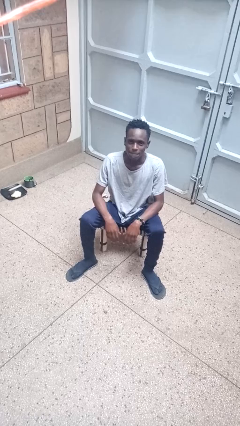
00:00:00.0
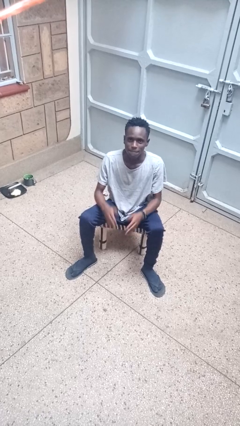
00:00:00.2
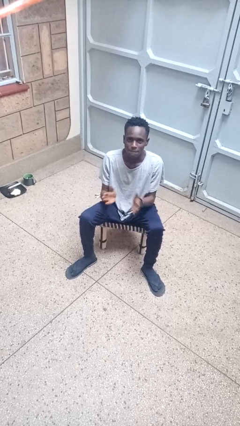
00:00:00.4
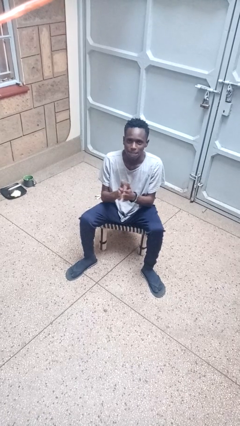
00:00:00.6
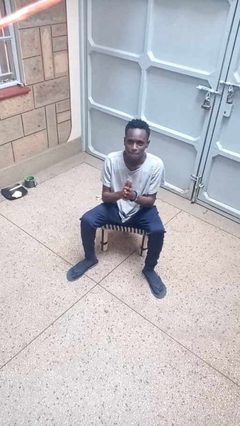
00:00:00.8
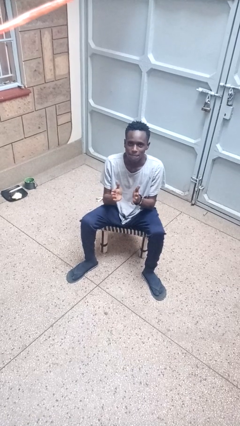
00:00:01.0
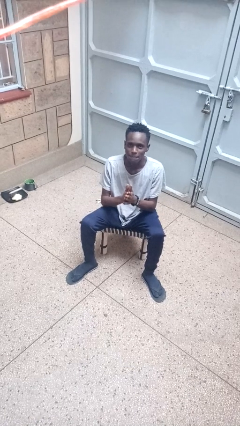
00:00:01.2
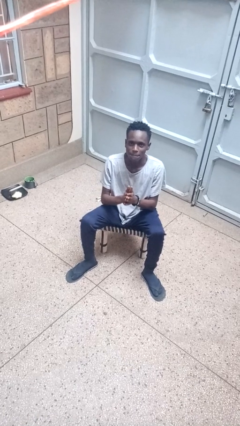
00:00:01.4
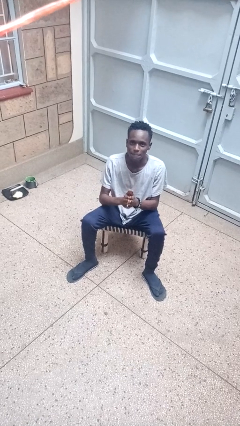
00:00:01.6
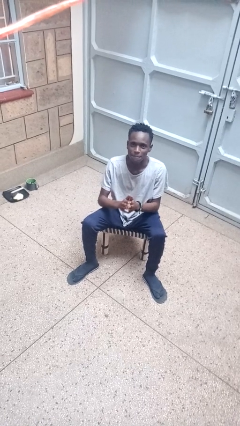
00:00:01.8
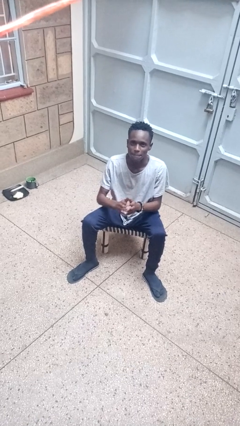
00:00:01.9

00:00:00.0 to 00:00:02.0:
person claps hands

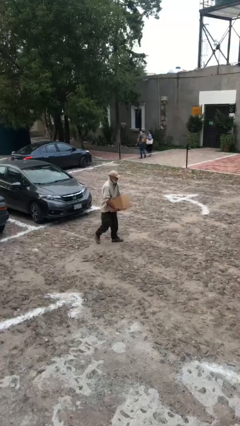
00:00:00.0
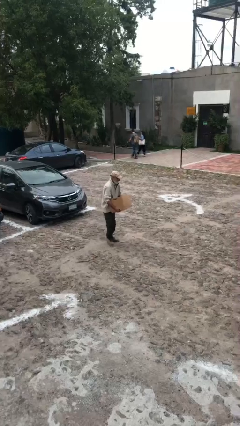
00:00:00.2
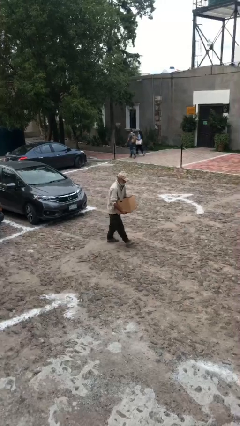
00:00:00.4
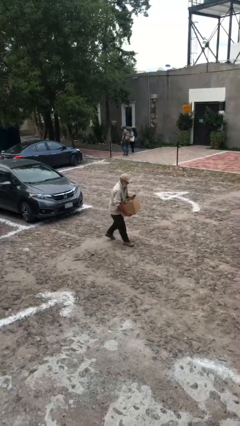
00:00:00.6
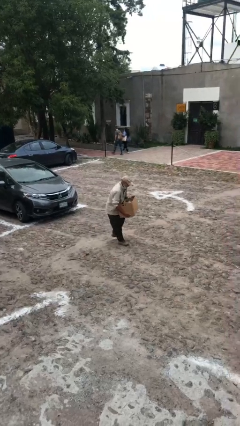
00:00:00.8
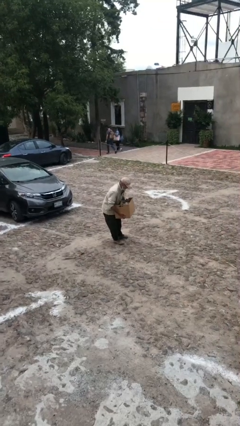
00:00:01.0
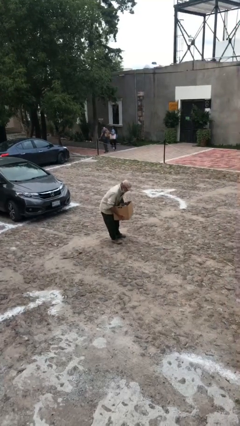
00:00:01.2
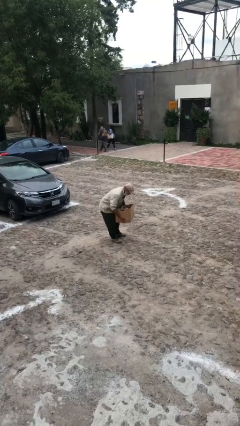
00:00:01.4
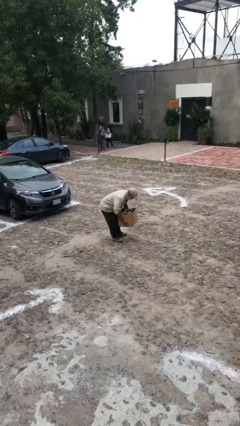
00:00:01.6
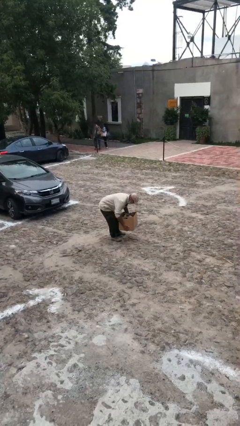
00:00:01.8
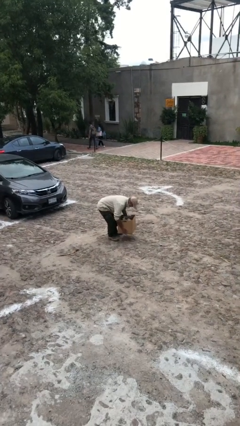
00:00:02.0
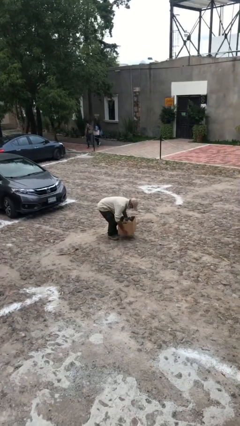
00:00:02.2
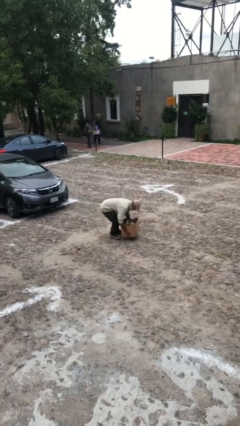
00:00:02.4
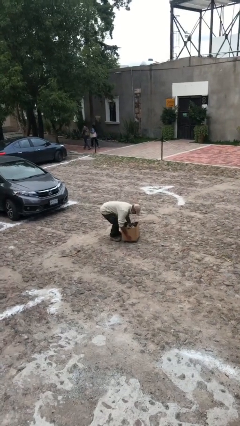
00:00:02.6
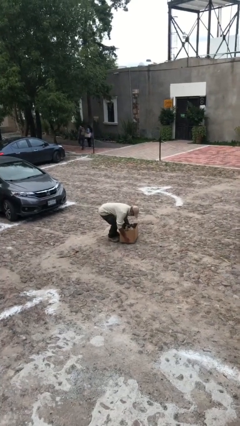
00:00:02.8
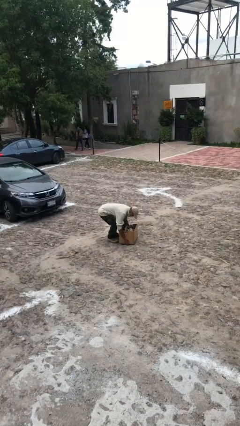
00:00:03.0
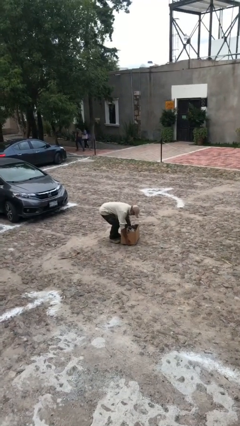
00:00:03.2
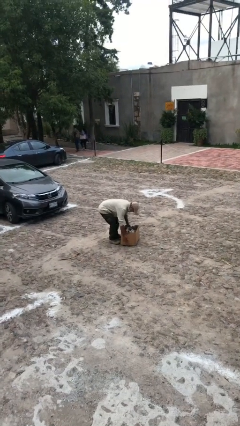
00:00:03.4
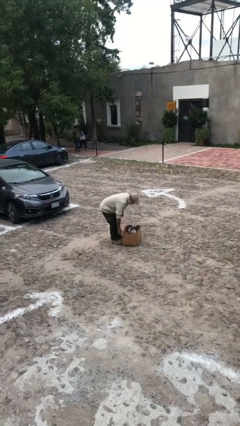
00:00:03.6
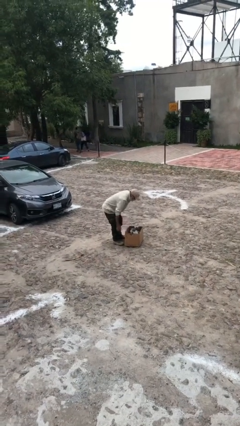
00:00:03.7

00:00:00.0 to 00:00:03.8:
person puts down object on floor

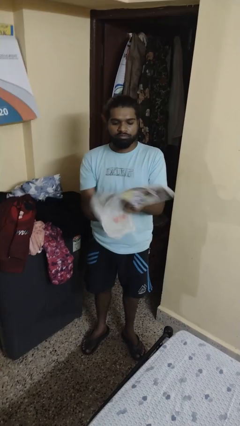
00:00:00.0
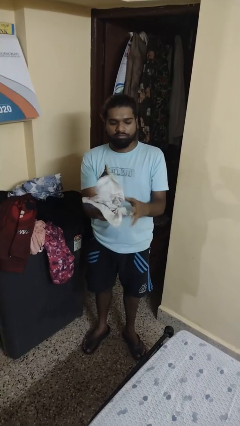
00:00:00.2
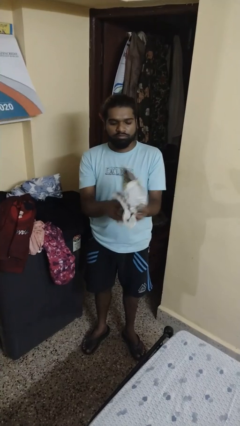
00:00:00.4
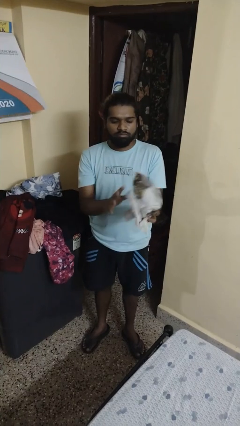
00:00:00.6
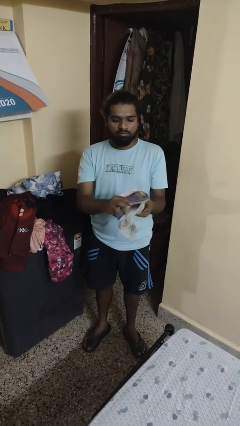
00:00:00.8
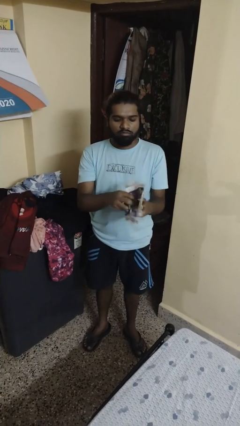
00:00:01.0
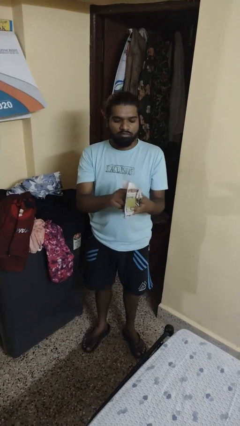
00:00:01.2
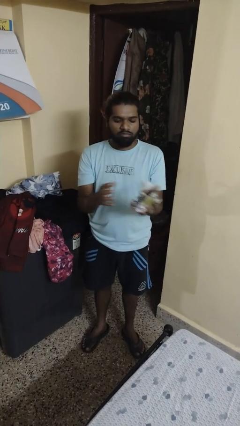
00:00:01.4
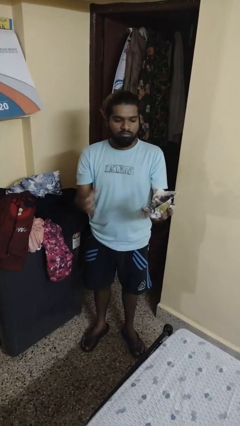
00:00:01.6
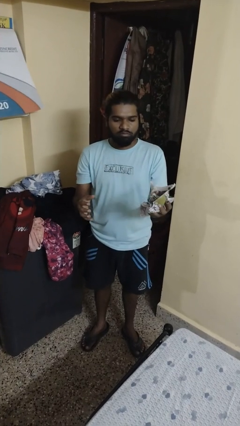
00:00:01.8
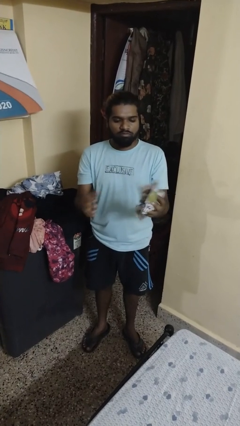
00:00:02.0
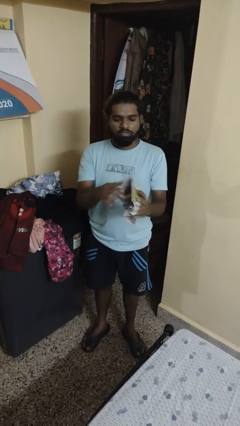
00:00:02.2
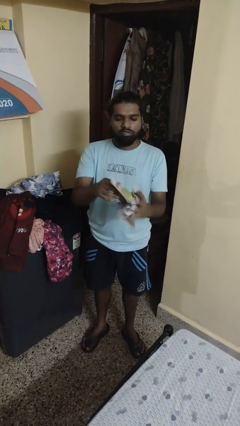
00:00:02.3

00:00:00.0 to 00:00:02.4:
person crumples paper

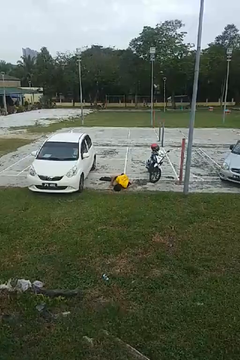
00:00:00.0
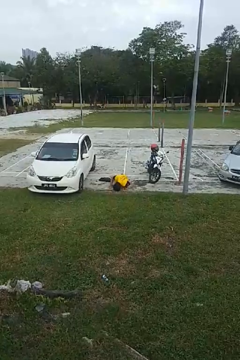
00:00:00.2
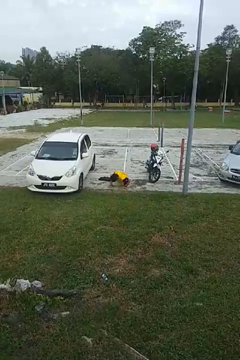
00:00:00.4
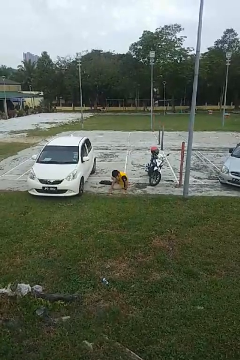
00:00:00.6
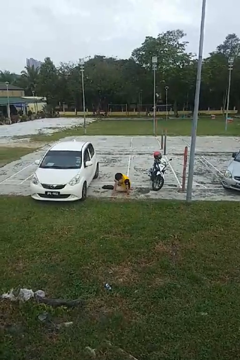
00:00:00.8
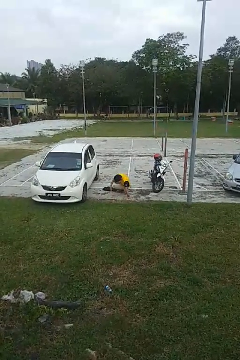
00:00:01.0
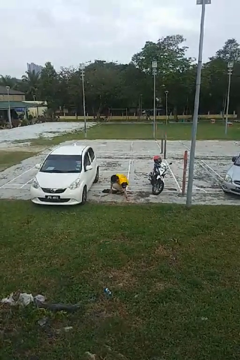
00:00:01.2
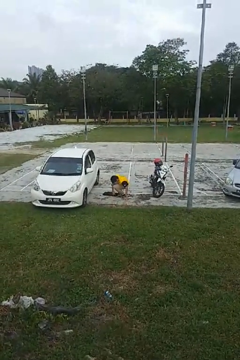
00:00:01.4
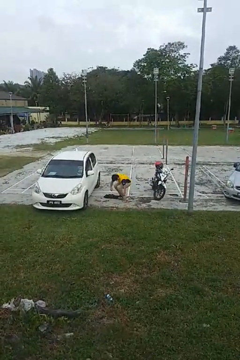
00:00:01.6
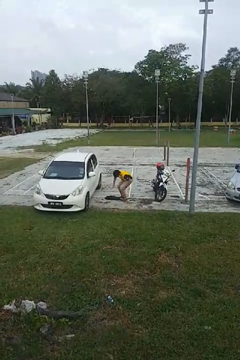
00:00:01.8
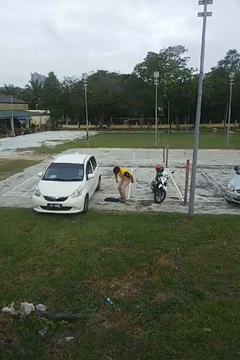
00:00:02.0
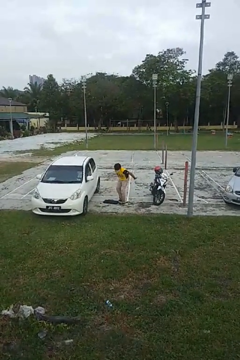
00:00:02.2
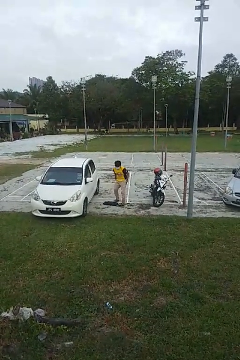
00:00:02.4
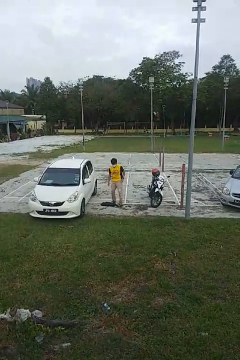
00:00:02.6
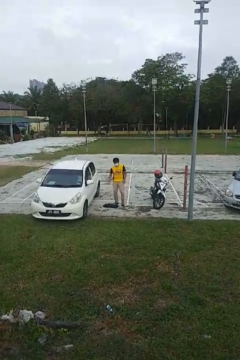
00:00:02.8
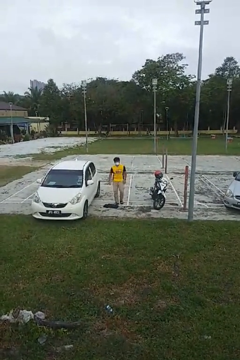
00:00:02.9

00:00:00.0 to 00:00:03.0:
person stands up from floor

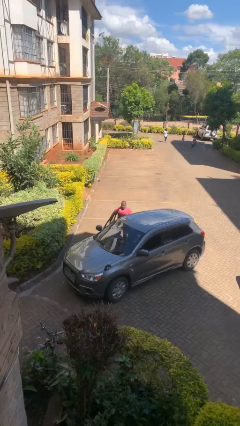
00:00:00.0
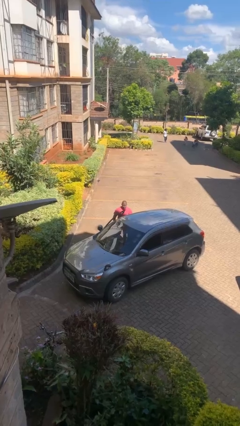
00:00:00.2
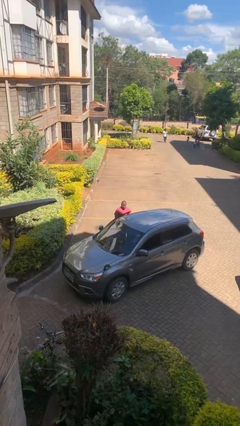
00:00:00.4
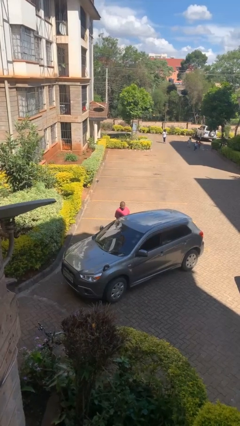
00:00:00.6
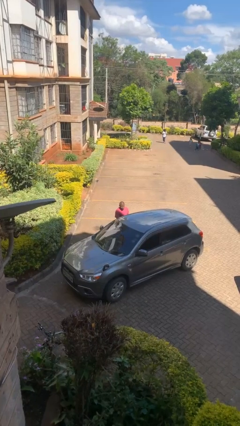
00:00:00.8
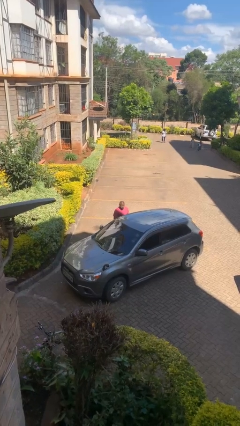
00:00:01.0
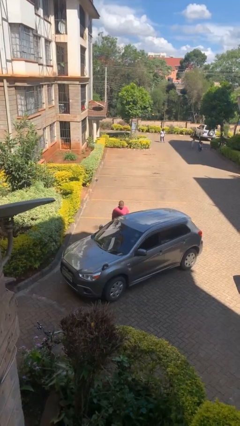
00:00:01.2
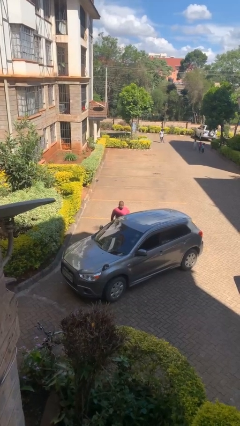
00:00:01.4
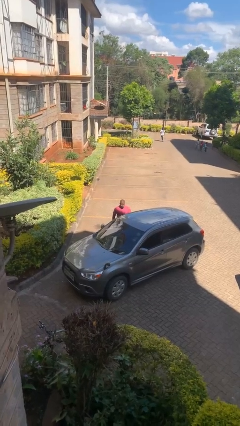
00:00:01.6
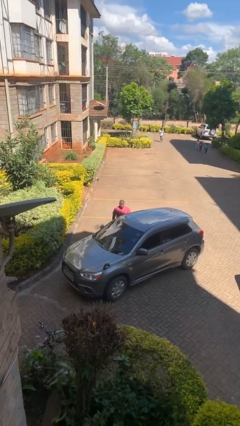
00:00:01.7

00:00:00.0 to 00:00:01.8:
person closes car door

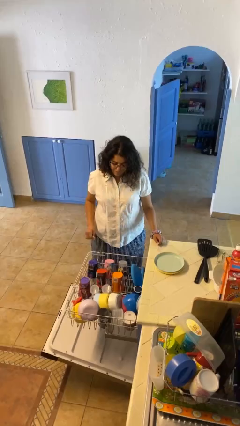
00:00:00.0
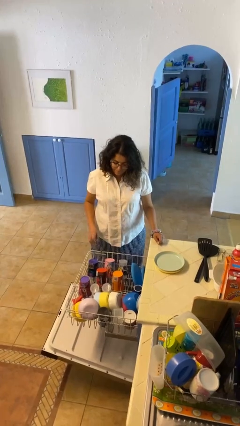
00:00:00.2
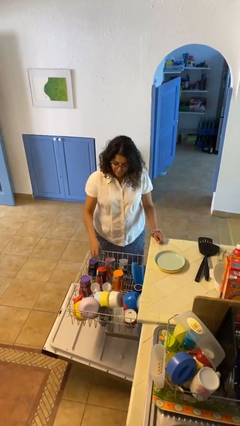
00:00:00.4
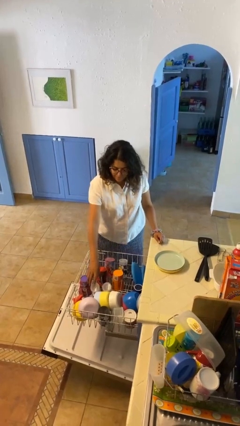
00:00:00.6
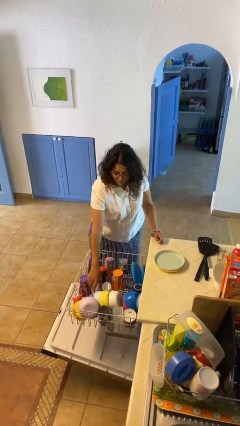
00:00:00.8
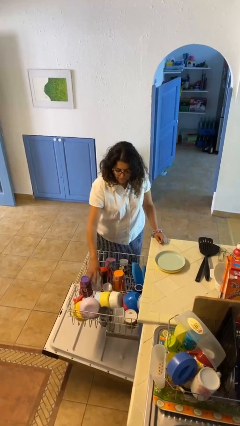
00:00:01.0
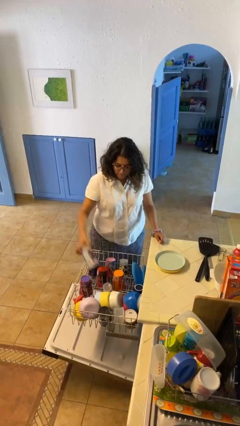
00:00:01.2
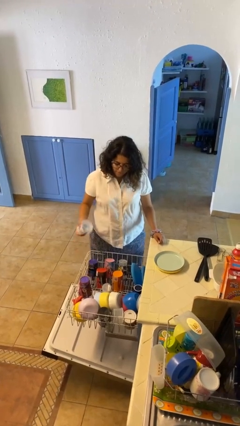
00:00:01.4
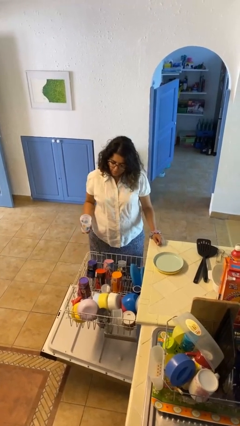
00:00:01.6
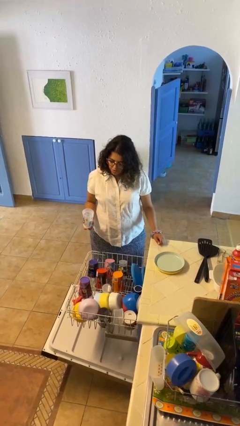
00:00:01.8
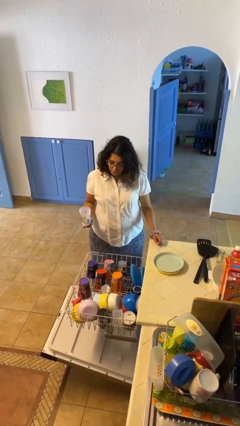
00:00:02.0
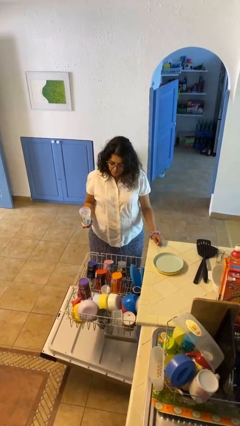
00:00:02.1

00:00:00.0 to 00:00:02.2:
person unloads dishwasher

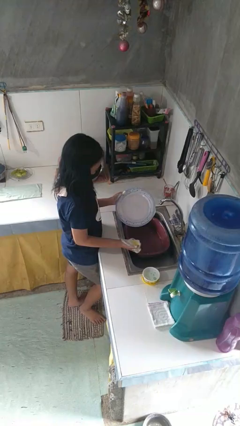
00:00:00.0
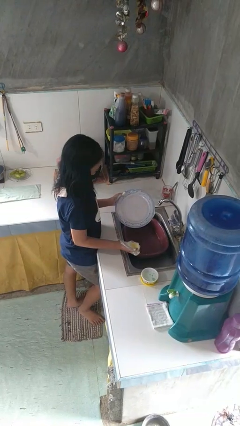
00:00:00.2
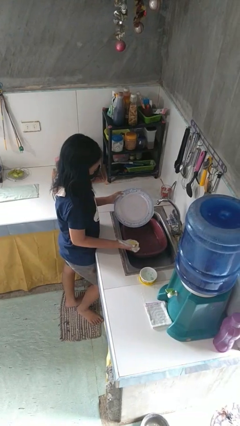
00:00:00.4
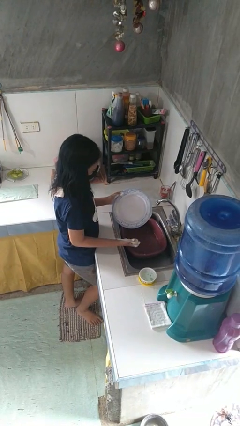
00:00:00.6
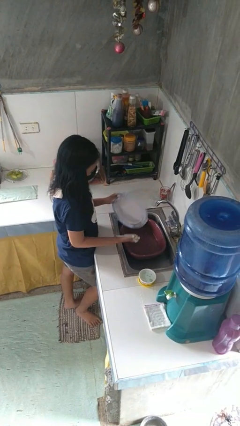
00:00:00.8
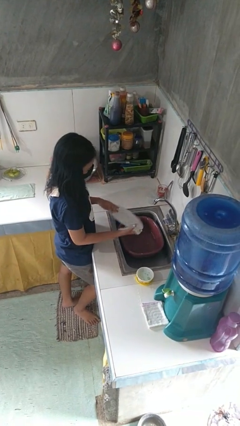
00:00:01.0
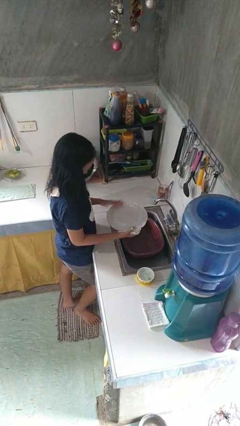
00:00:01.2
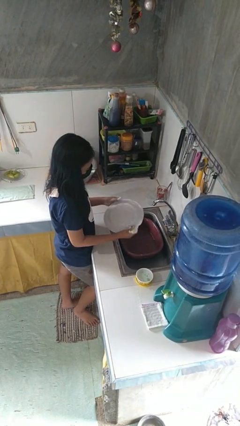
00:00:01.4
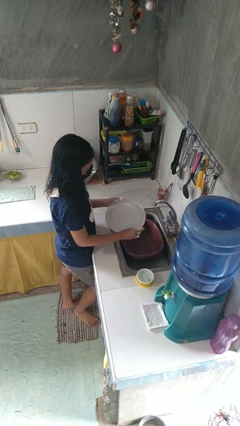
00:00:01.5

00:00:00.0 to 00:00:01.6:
person washes dish

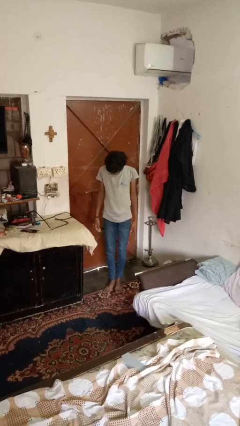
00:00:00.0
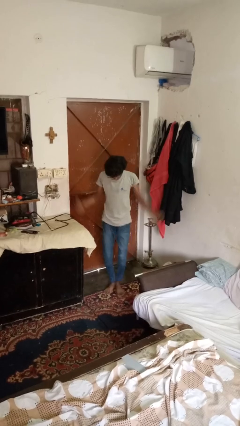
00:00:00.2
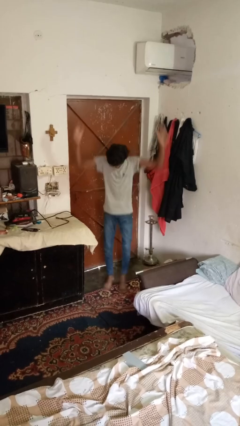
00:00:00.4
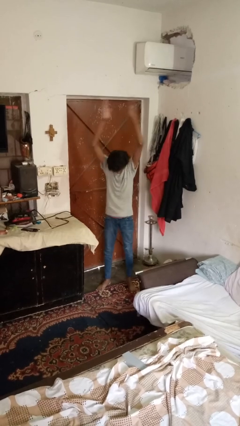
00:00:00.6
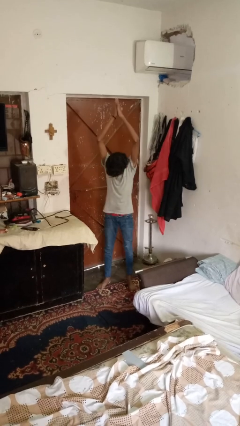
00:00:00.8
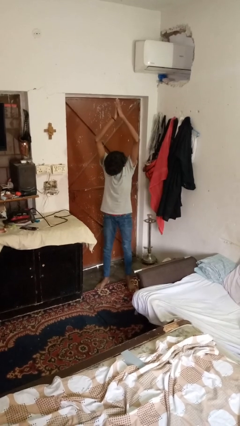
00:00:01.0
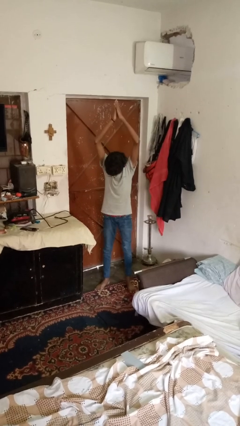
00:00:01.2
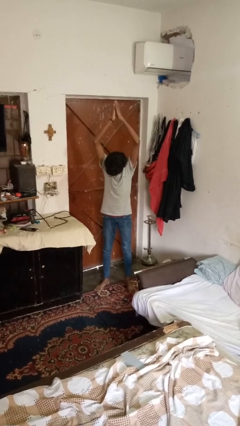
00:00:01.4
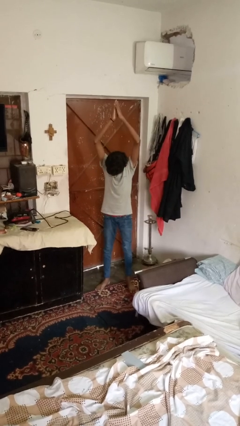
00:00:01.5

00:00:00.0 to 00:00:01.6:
person exercises with jumping jacks
